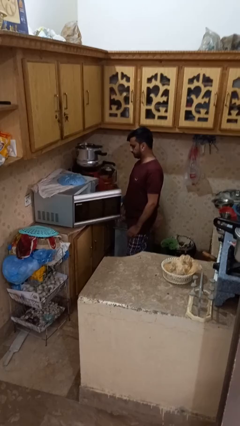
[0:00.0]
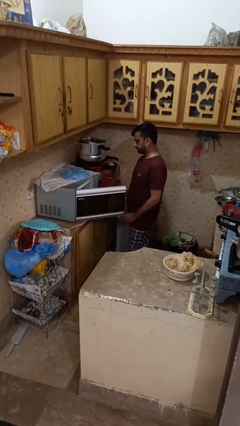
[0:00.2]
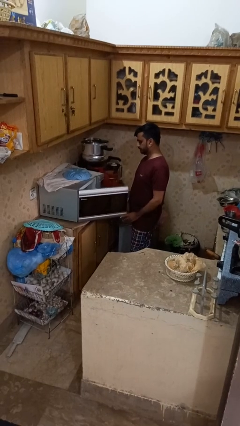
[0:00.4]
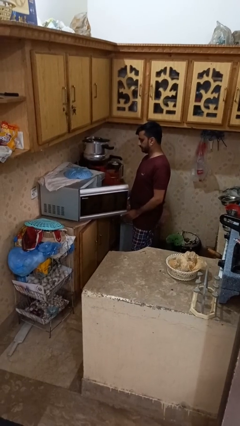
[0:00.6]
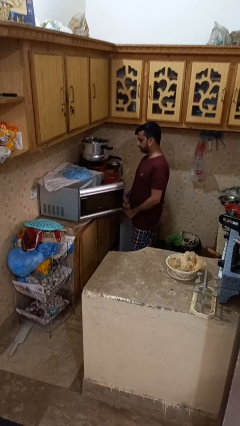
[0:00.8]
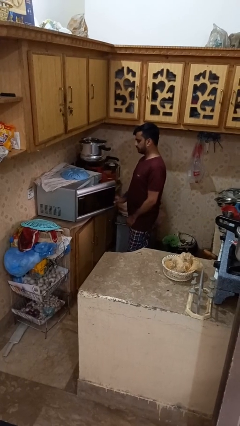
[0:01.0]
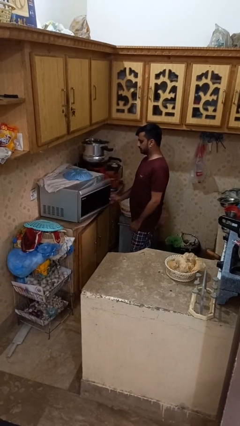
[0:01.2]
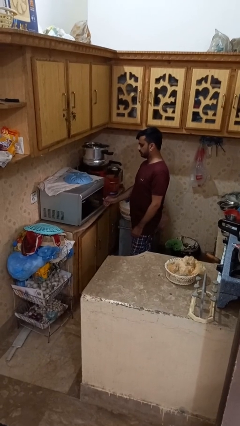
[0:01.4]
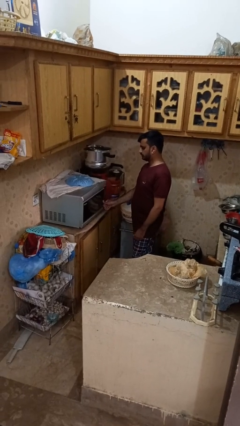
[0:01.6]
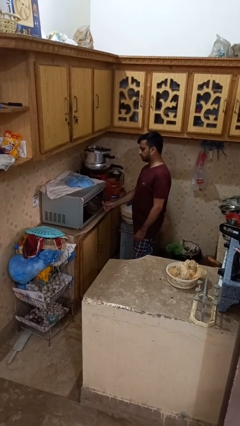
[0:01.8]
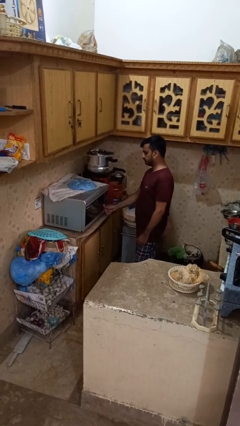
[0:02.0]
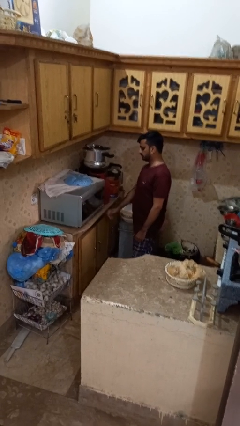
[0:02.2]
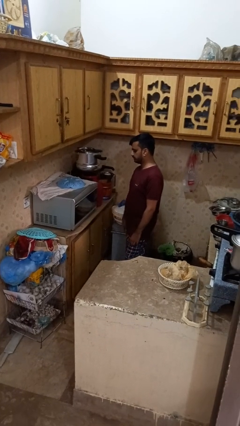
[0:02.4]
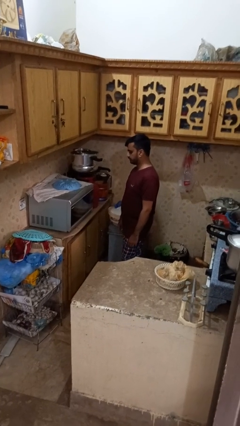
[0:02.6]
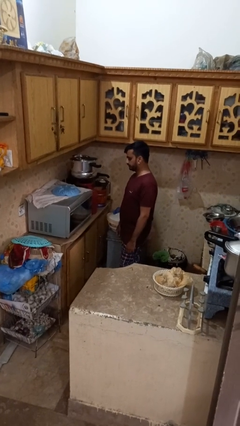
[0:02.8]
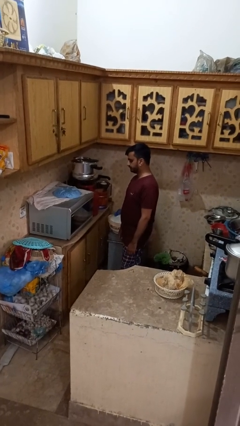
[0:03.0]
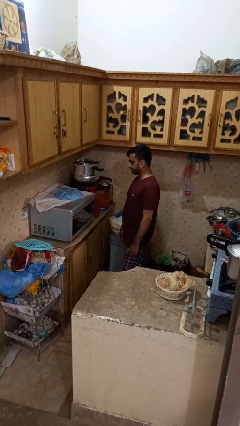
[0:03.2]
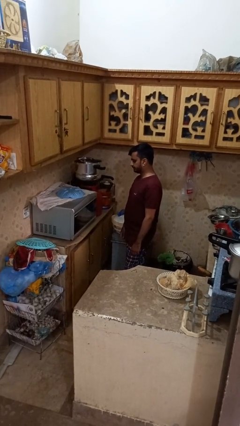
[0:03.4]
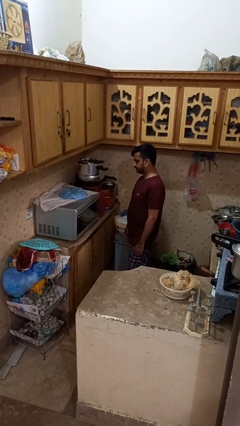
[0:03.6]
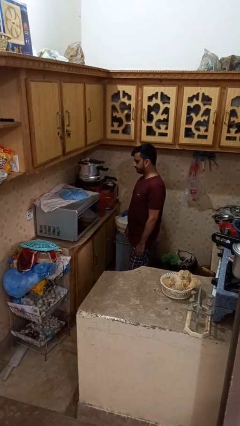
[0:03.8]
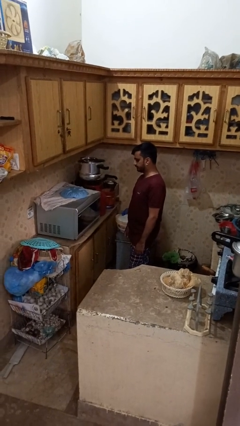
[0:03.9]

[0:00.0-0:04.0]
person closes microwave

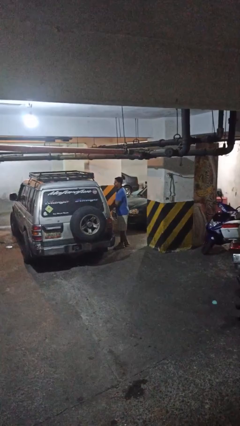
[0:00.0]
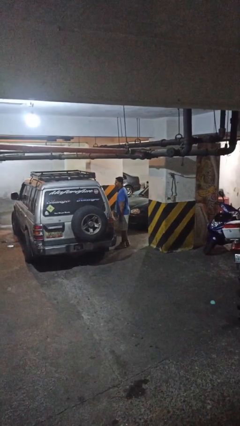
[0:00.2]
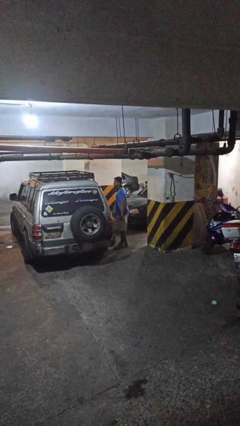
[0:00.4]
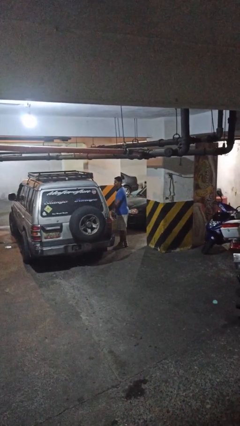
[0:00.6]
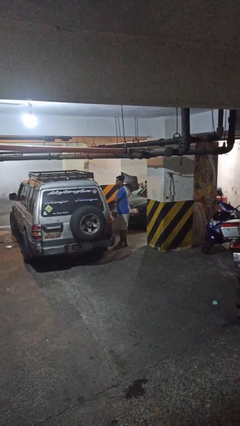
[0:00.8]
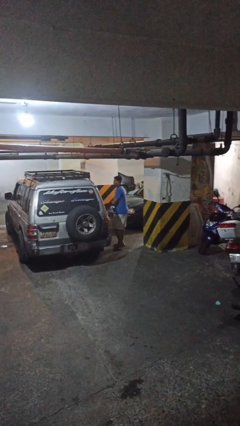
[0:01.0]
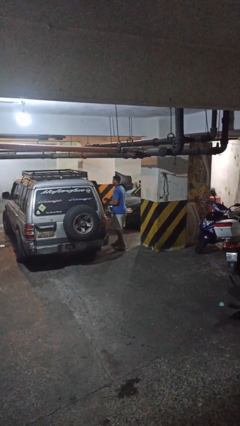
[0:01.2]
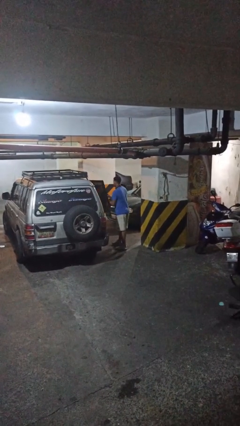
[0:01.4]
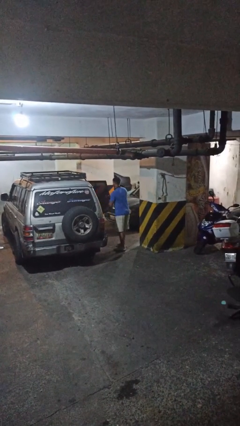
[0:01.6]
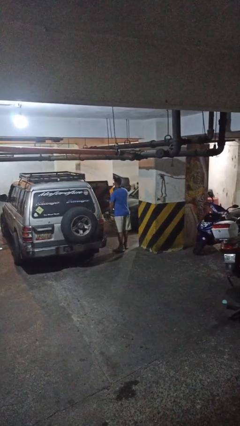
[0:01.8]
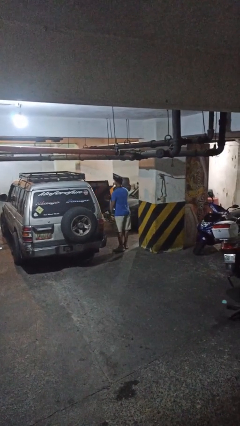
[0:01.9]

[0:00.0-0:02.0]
person opens car door

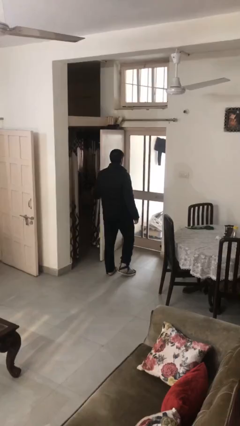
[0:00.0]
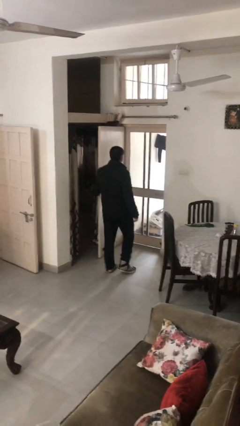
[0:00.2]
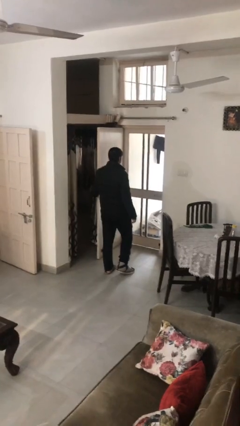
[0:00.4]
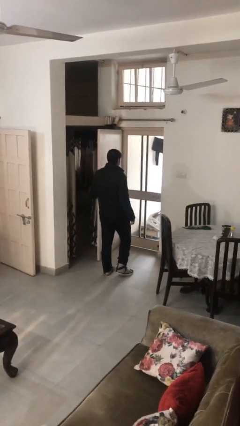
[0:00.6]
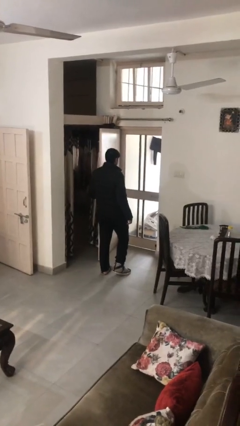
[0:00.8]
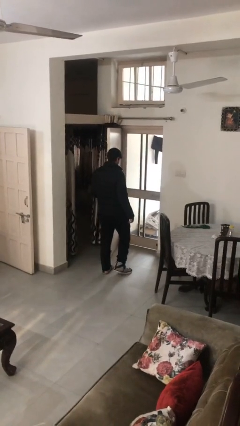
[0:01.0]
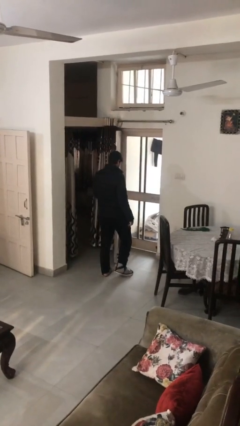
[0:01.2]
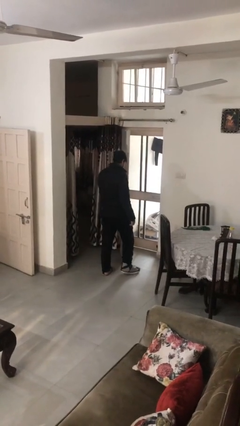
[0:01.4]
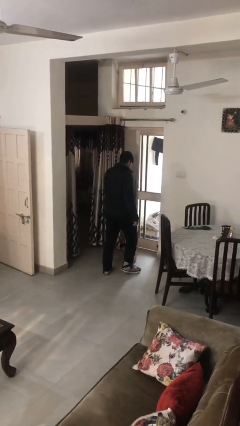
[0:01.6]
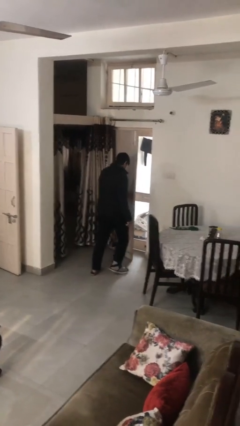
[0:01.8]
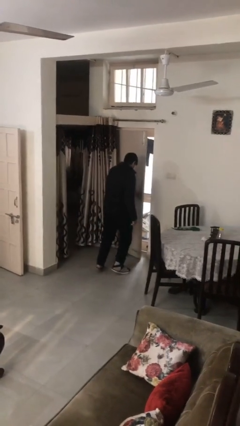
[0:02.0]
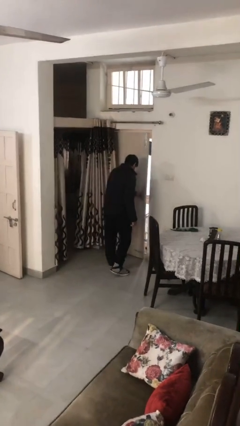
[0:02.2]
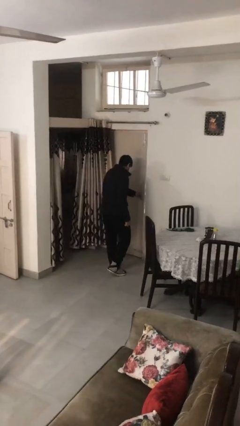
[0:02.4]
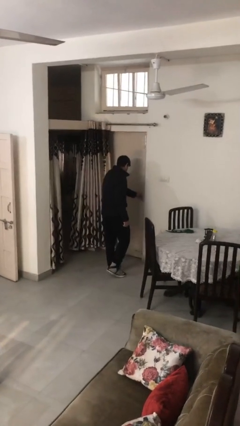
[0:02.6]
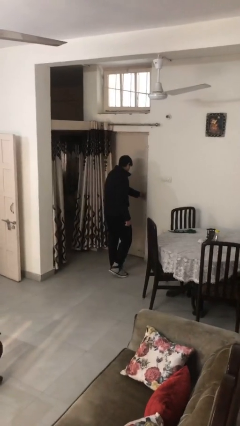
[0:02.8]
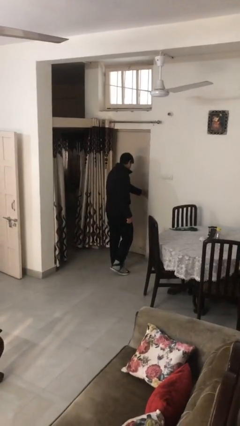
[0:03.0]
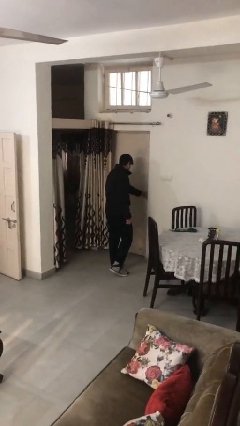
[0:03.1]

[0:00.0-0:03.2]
person closes facility door

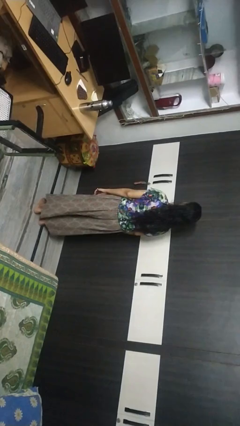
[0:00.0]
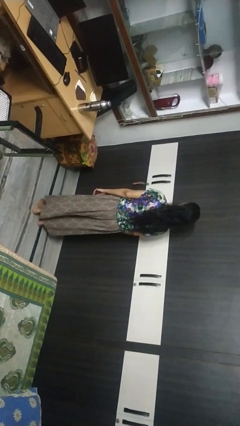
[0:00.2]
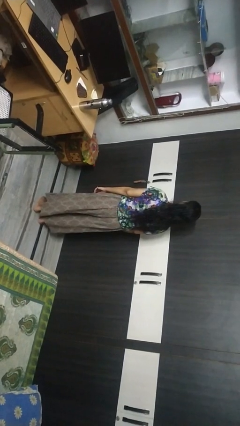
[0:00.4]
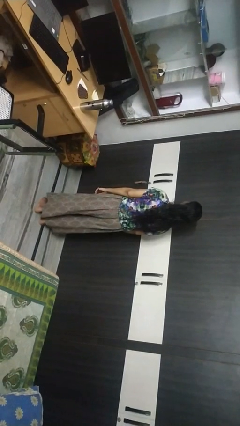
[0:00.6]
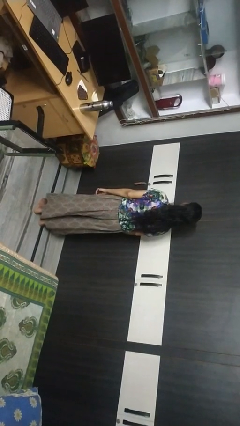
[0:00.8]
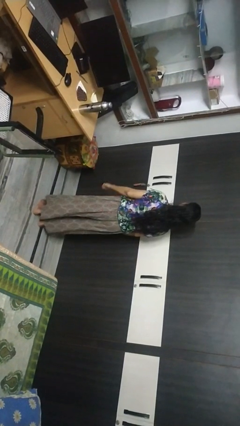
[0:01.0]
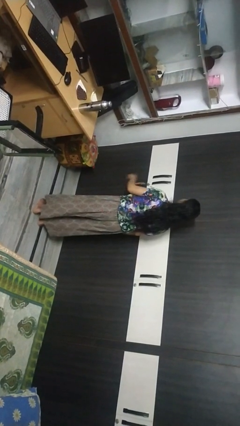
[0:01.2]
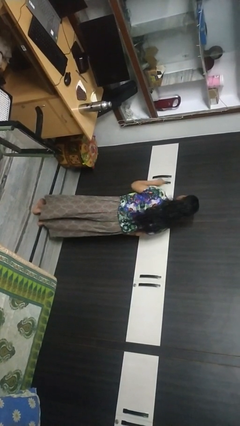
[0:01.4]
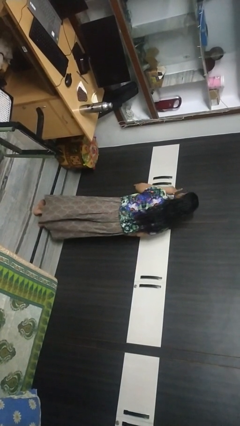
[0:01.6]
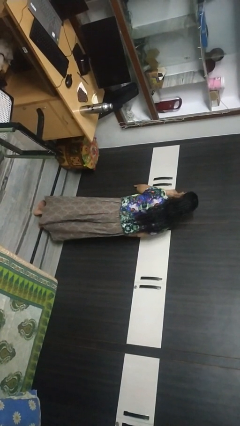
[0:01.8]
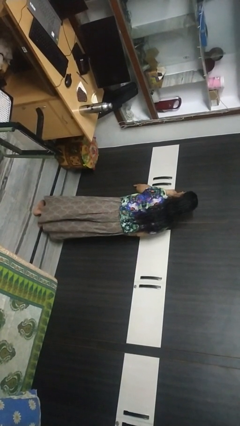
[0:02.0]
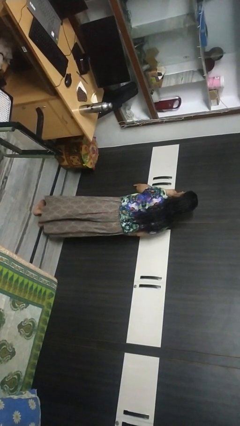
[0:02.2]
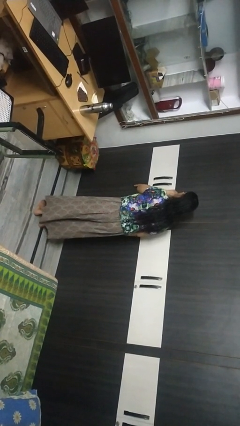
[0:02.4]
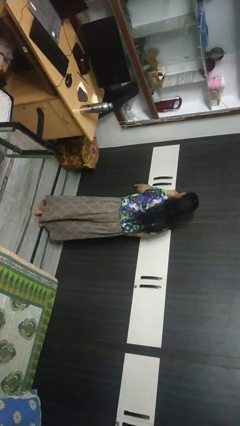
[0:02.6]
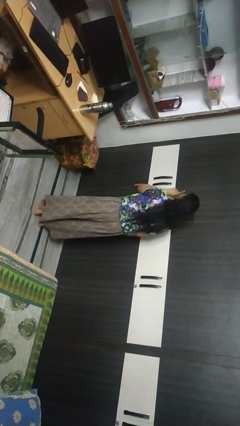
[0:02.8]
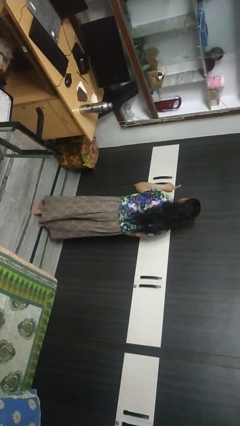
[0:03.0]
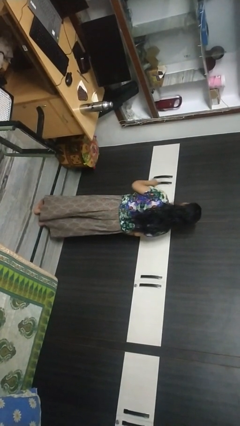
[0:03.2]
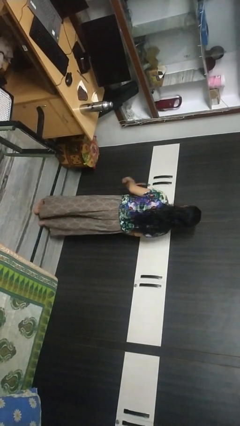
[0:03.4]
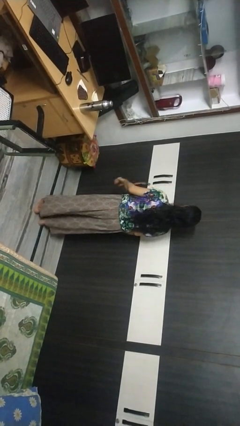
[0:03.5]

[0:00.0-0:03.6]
person gestures be quiet

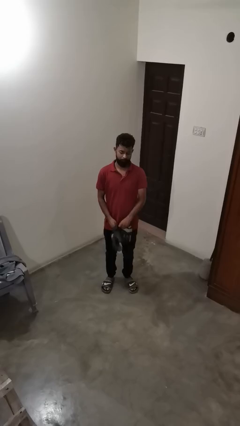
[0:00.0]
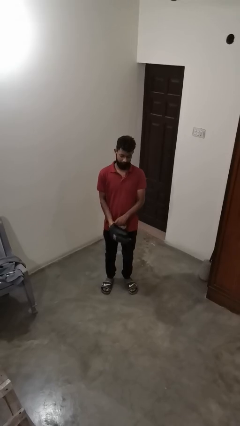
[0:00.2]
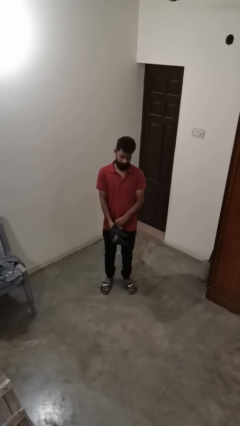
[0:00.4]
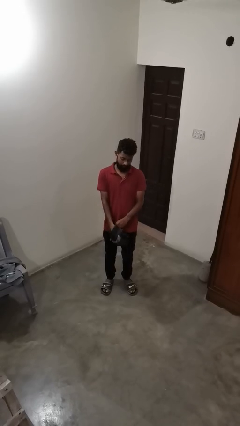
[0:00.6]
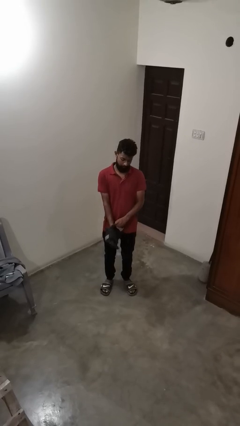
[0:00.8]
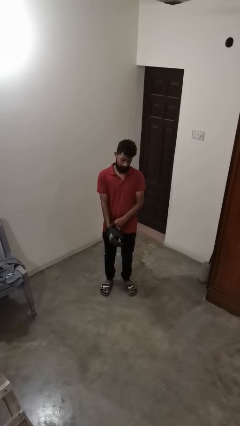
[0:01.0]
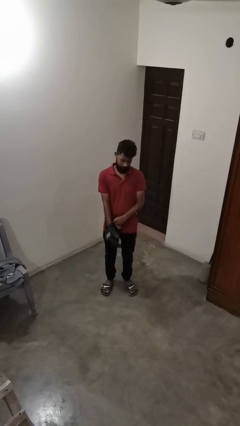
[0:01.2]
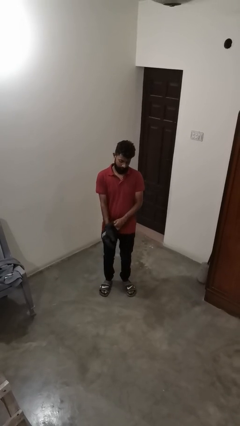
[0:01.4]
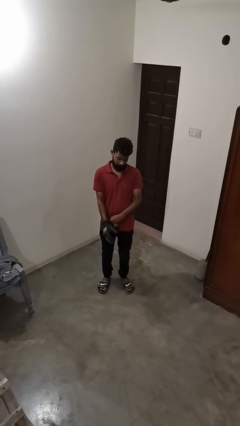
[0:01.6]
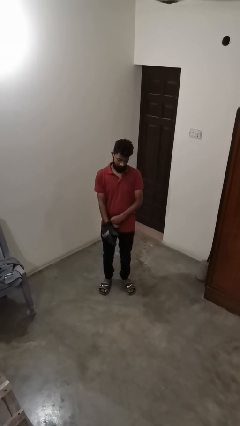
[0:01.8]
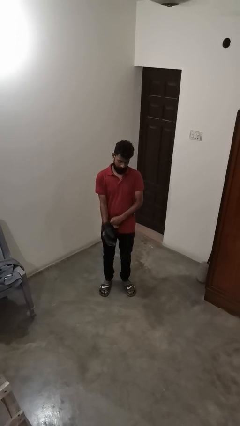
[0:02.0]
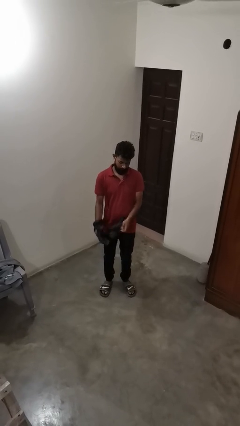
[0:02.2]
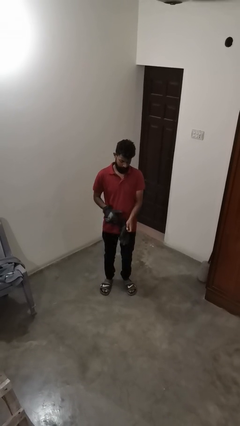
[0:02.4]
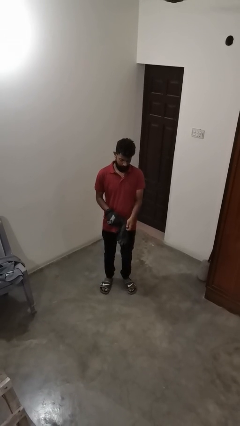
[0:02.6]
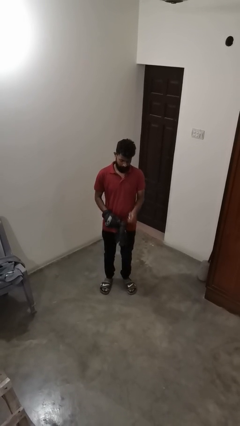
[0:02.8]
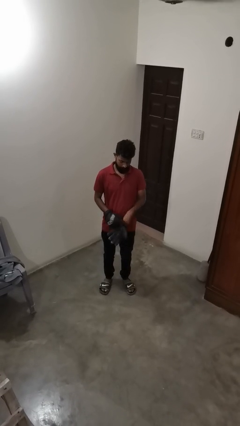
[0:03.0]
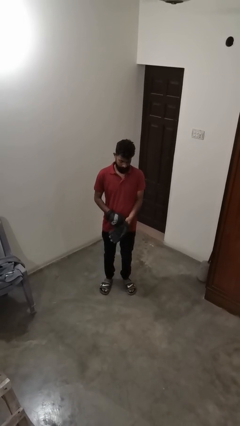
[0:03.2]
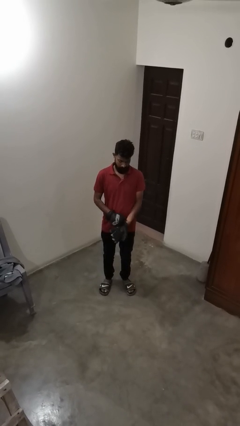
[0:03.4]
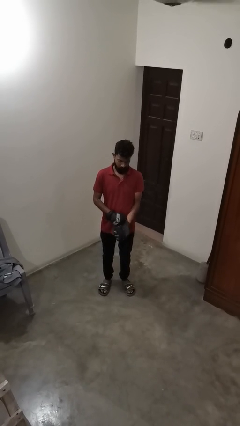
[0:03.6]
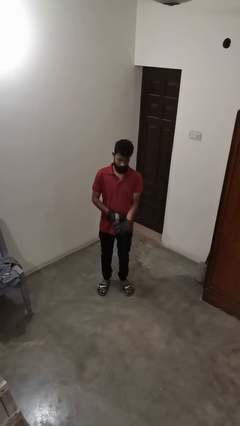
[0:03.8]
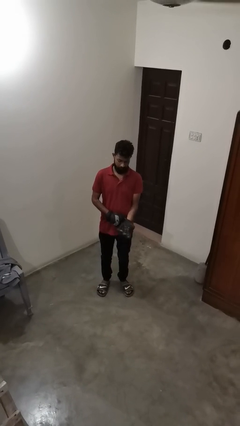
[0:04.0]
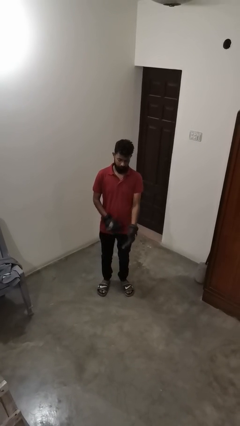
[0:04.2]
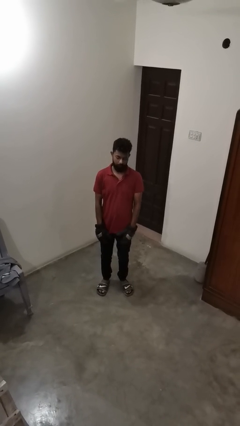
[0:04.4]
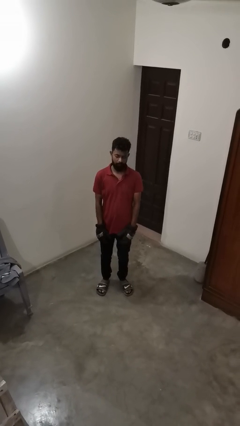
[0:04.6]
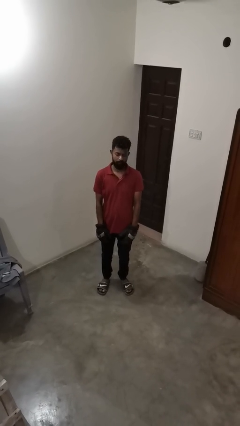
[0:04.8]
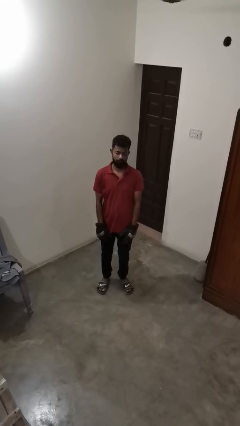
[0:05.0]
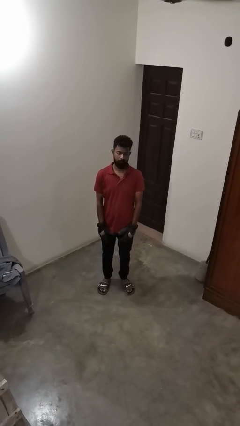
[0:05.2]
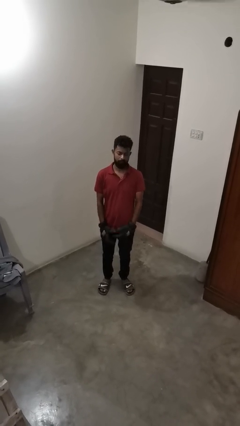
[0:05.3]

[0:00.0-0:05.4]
person puts on gloves
